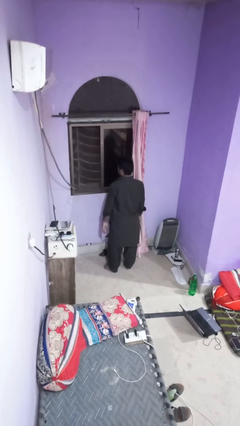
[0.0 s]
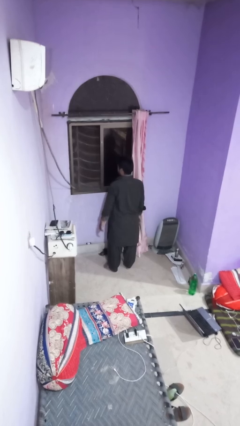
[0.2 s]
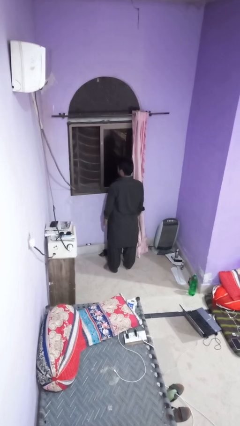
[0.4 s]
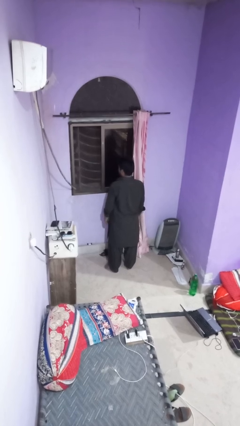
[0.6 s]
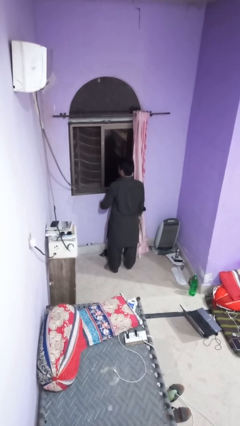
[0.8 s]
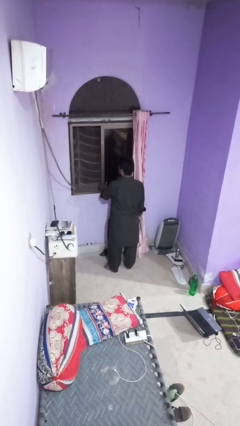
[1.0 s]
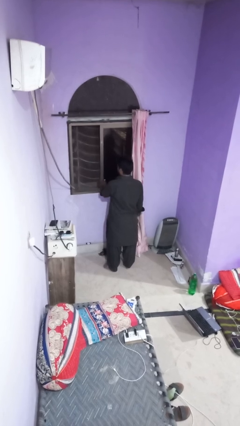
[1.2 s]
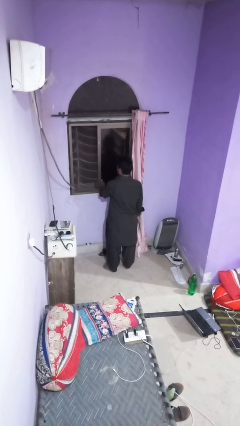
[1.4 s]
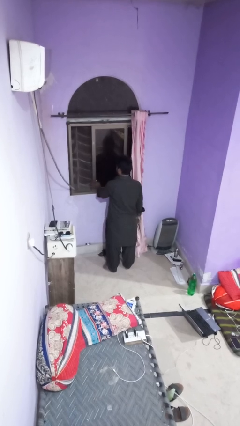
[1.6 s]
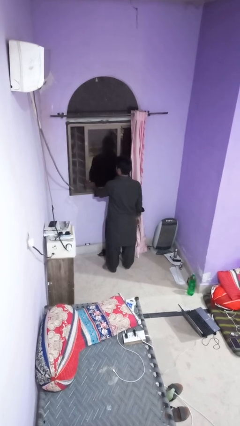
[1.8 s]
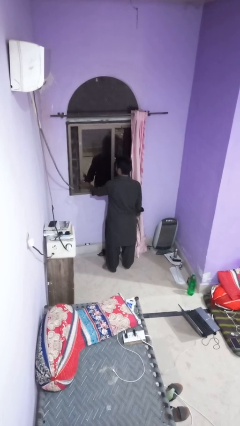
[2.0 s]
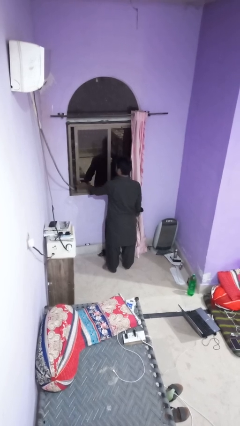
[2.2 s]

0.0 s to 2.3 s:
person closes home window

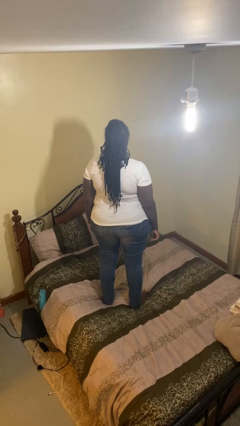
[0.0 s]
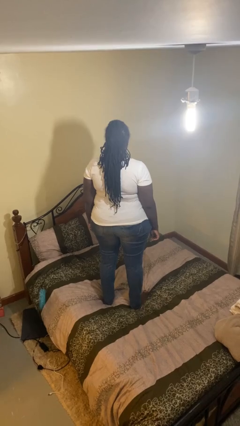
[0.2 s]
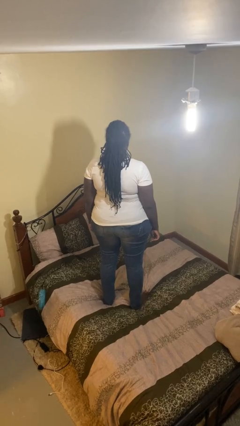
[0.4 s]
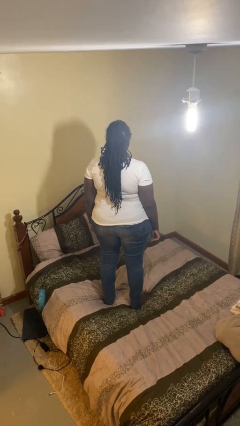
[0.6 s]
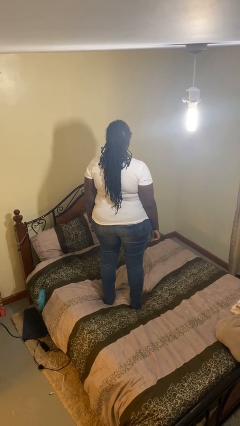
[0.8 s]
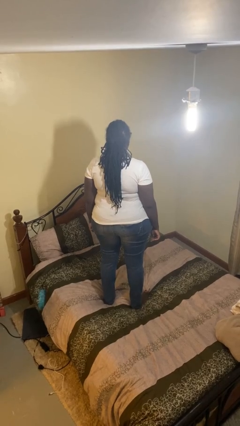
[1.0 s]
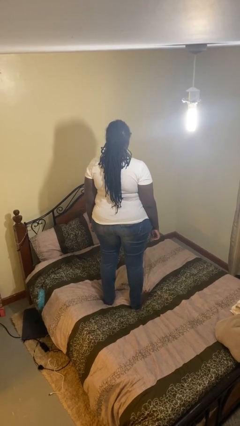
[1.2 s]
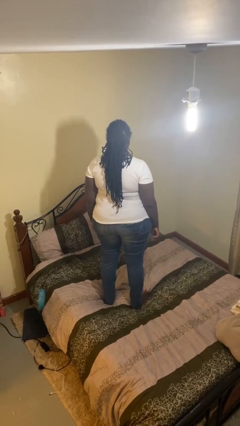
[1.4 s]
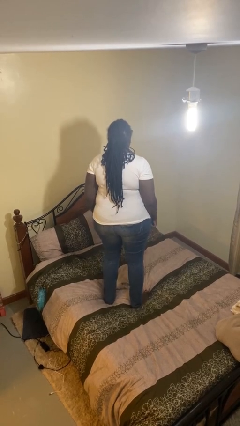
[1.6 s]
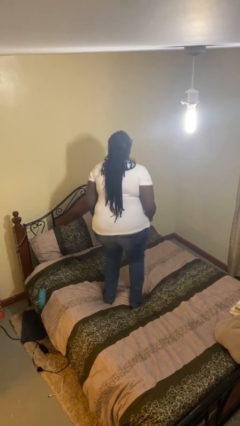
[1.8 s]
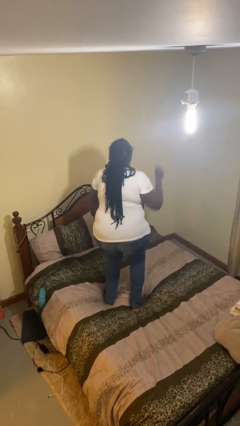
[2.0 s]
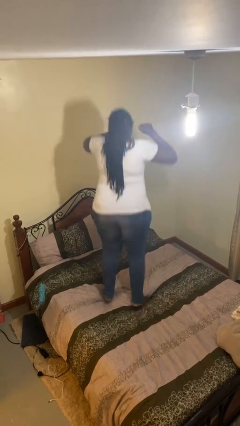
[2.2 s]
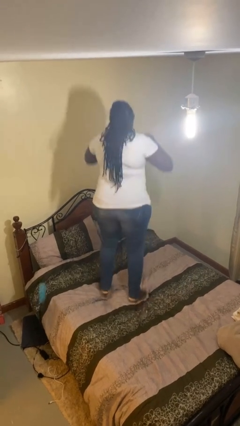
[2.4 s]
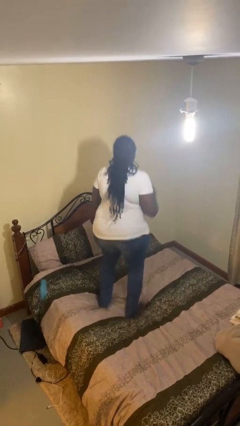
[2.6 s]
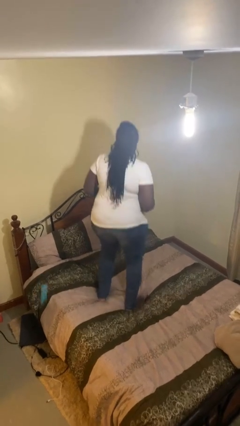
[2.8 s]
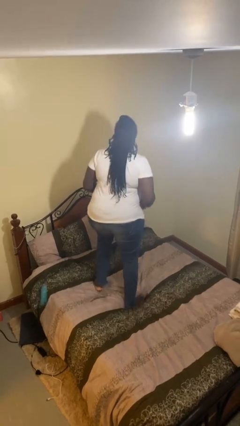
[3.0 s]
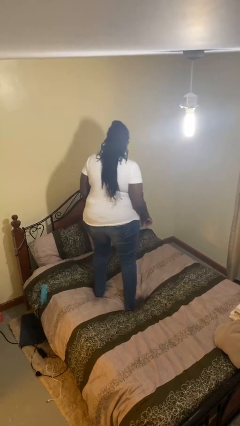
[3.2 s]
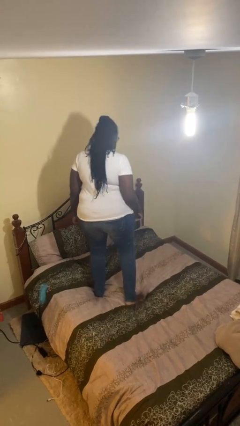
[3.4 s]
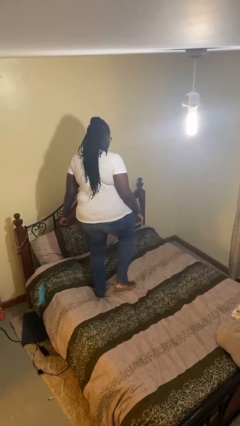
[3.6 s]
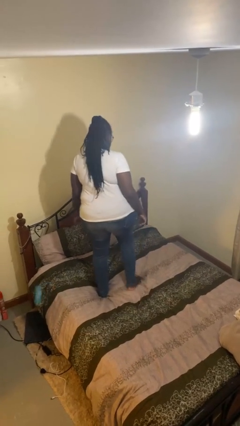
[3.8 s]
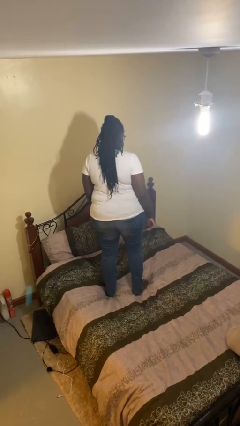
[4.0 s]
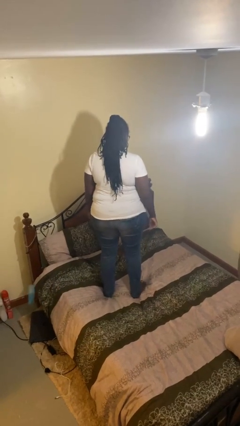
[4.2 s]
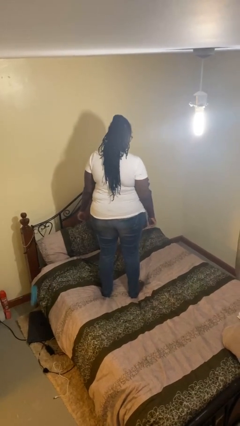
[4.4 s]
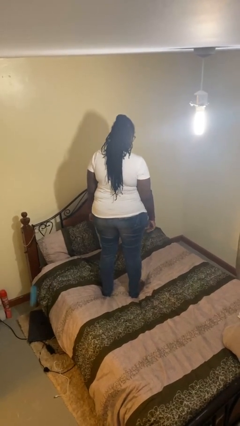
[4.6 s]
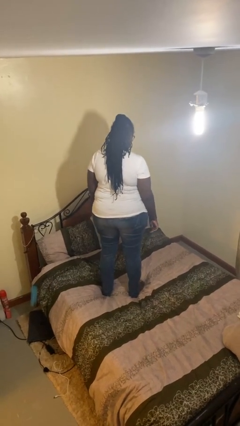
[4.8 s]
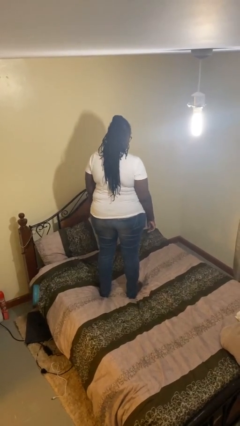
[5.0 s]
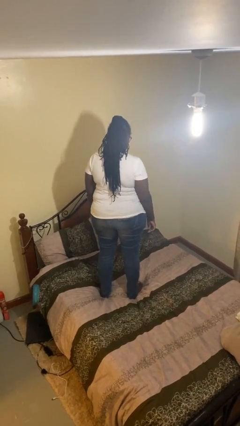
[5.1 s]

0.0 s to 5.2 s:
person jumps on bed

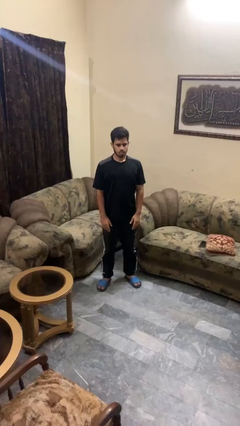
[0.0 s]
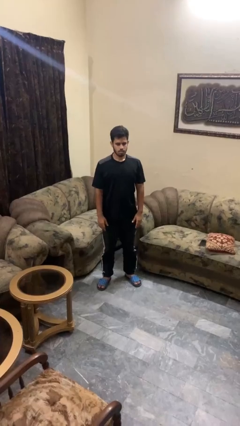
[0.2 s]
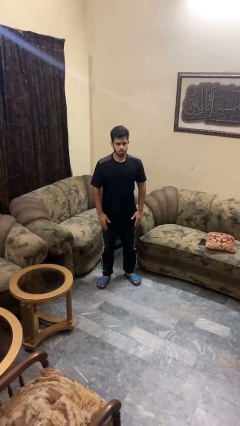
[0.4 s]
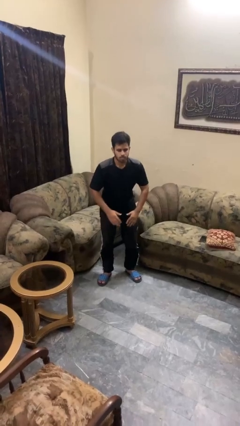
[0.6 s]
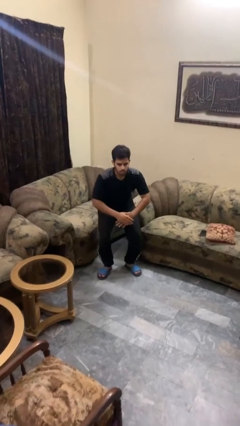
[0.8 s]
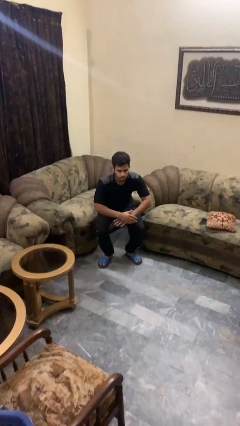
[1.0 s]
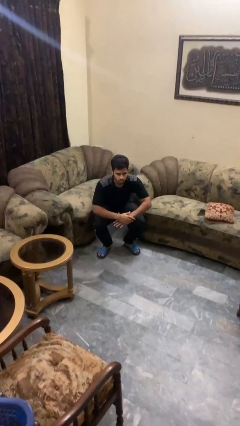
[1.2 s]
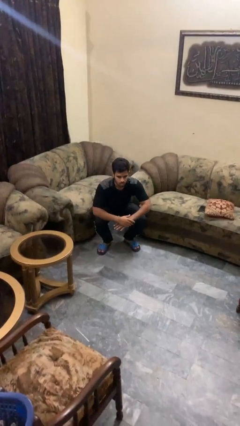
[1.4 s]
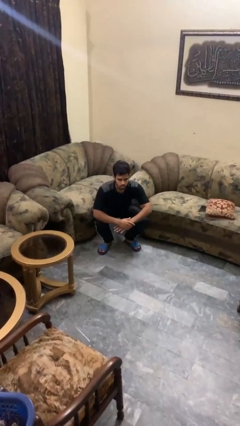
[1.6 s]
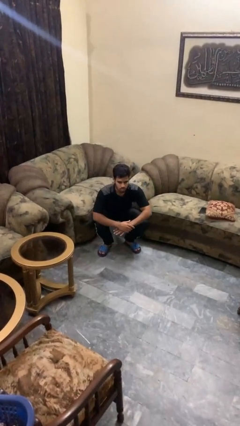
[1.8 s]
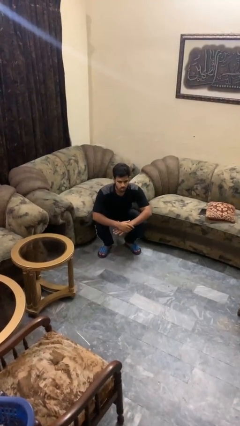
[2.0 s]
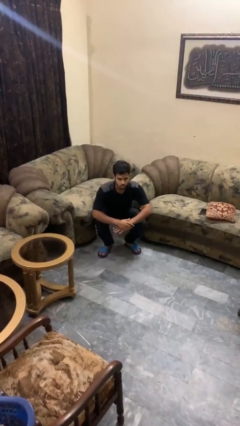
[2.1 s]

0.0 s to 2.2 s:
person squats

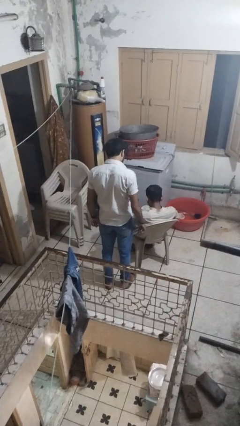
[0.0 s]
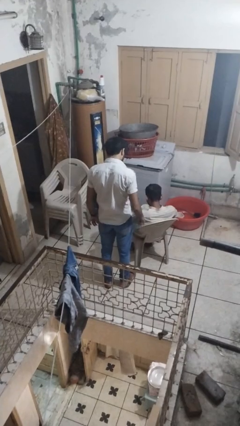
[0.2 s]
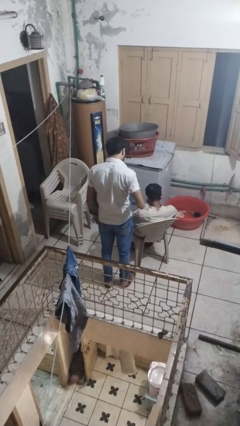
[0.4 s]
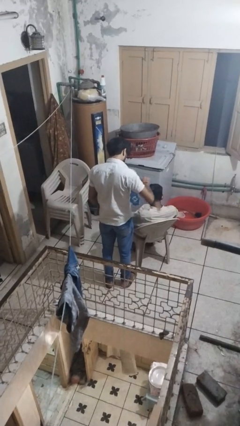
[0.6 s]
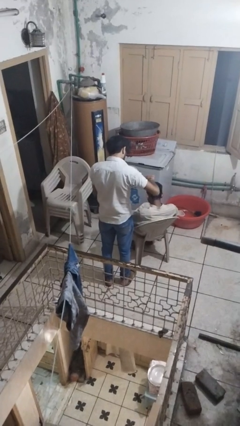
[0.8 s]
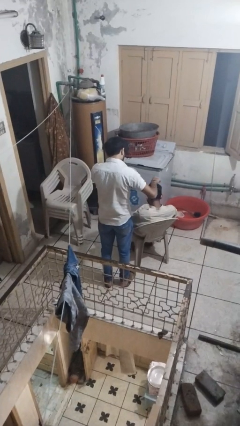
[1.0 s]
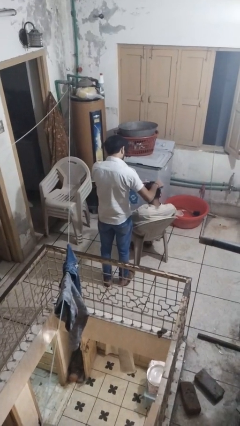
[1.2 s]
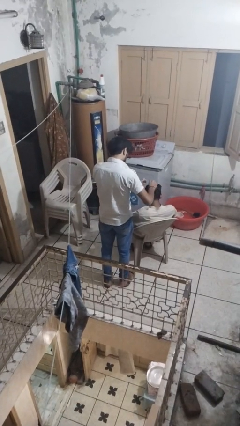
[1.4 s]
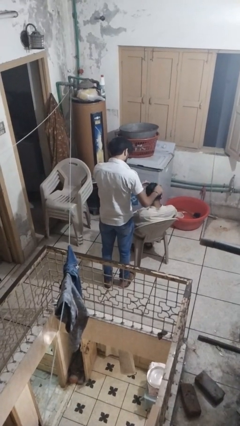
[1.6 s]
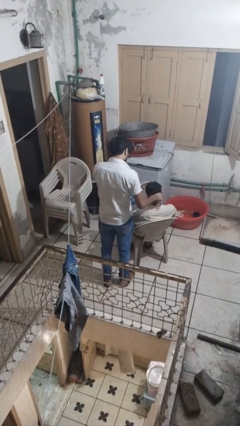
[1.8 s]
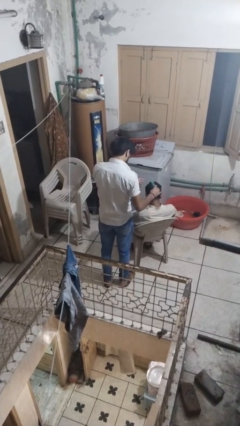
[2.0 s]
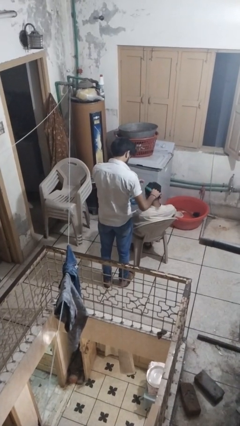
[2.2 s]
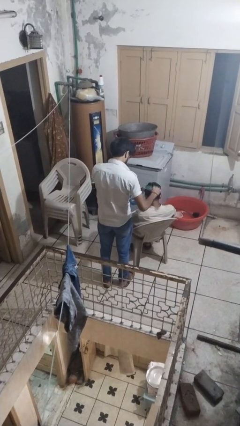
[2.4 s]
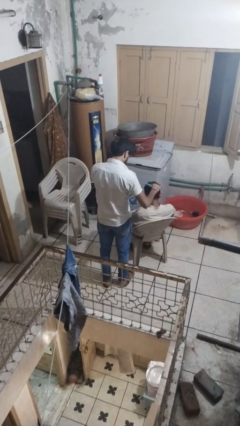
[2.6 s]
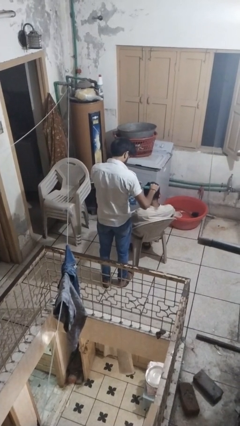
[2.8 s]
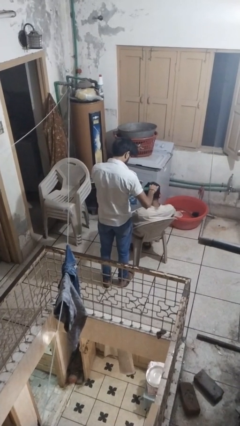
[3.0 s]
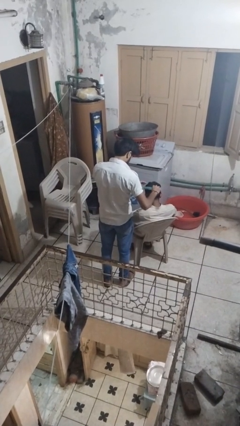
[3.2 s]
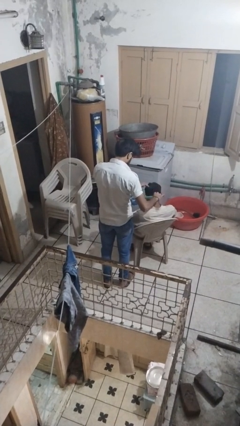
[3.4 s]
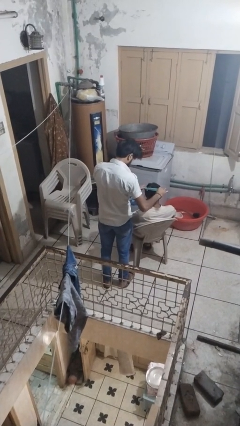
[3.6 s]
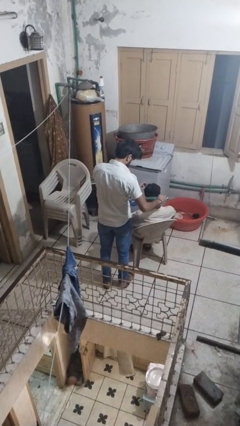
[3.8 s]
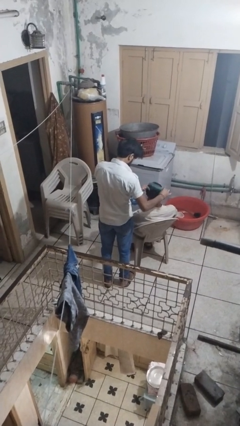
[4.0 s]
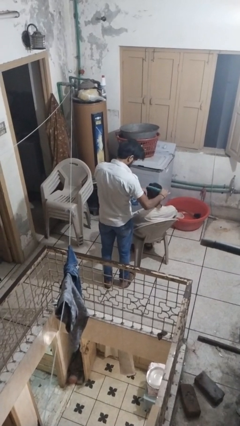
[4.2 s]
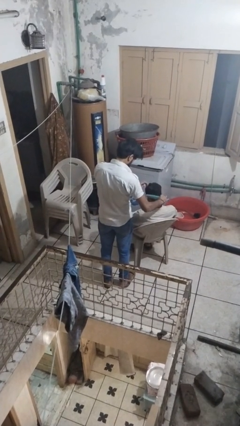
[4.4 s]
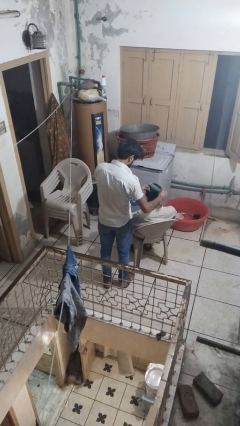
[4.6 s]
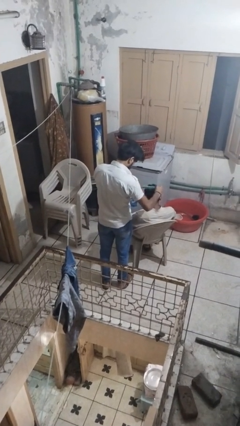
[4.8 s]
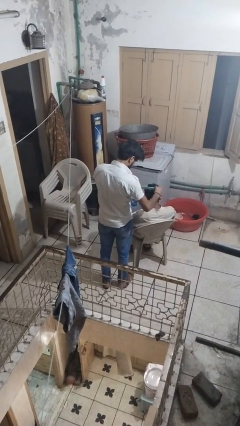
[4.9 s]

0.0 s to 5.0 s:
person brushes hair of person

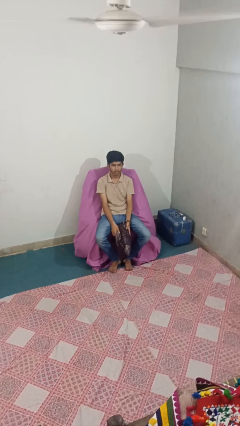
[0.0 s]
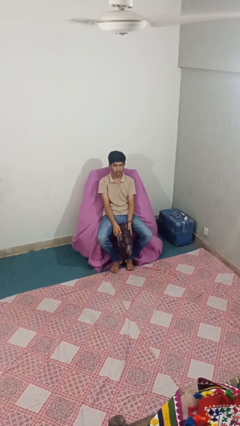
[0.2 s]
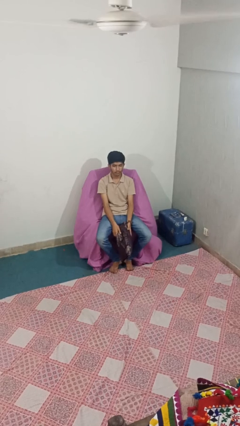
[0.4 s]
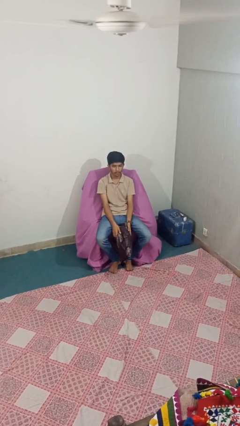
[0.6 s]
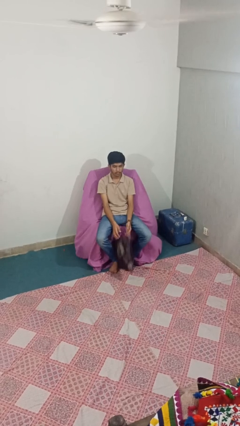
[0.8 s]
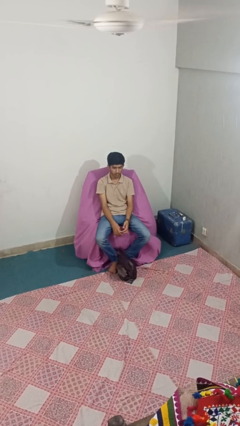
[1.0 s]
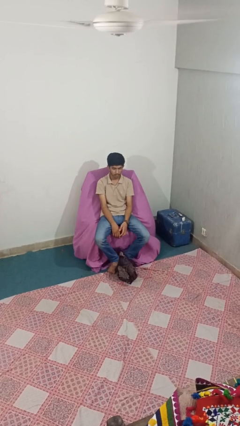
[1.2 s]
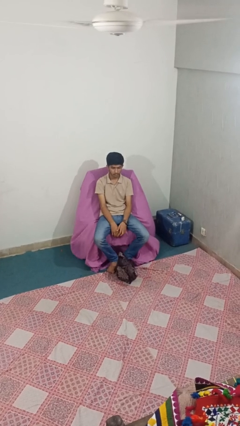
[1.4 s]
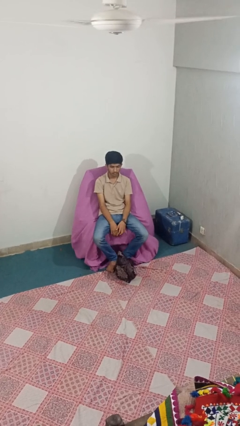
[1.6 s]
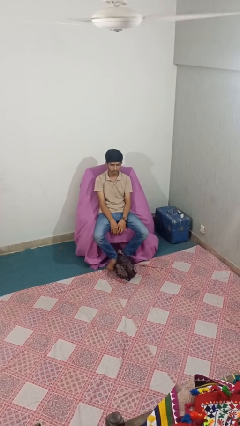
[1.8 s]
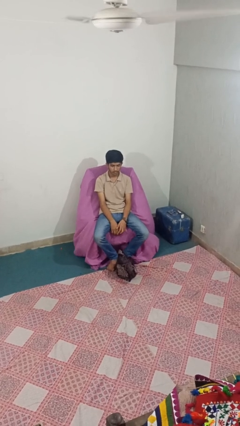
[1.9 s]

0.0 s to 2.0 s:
person drops object

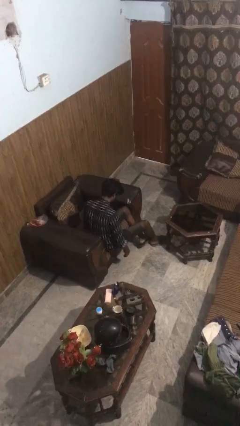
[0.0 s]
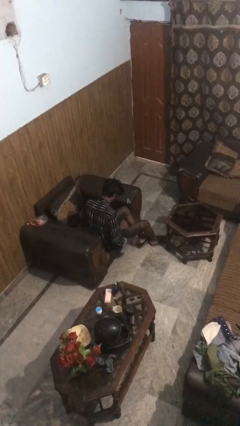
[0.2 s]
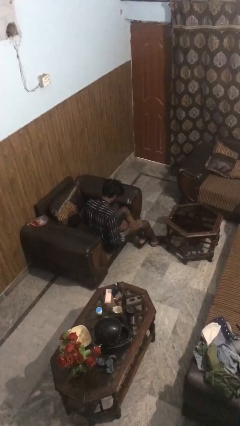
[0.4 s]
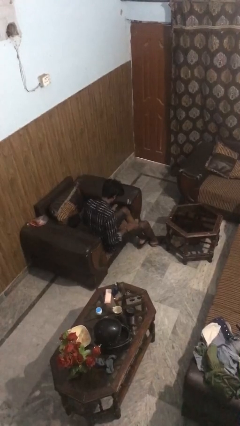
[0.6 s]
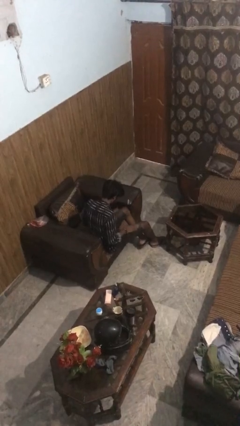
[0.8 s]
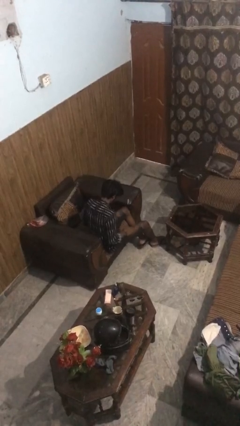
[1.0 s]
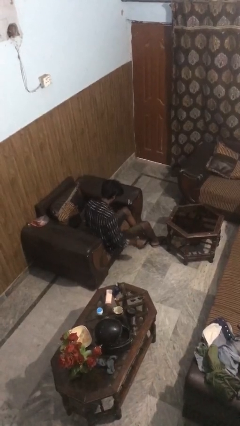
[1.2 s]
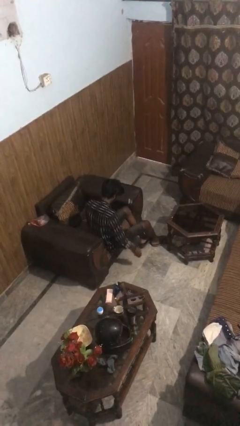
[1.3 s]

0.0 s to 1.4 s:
person slaps hands on thighs
